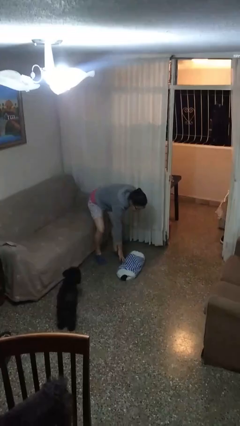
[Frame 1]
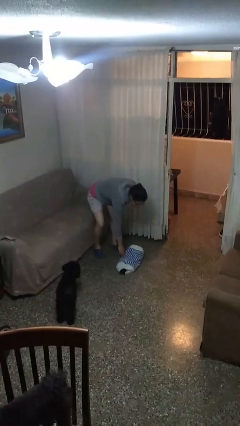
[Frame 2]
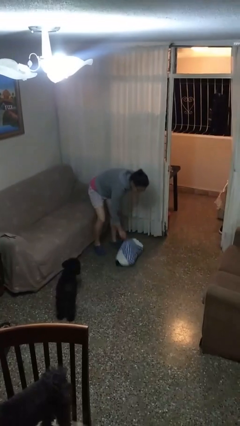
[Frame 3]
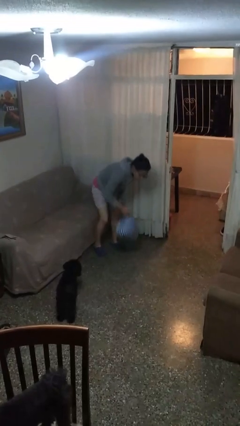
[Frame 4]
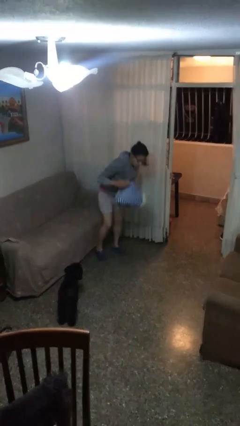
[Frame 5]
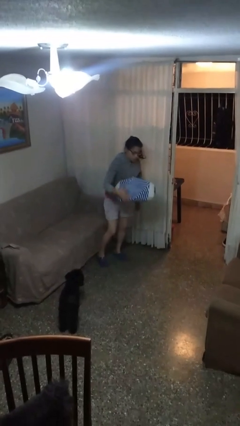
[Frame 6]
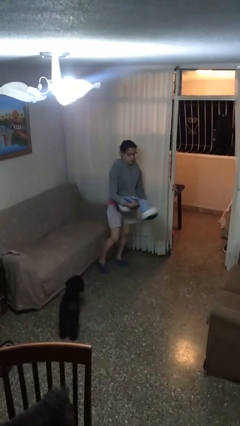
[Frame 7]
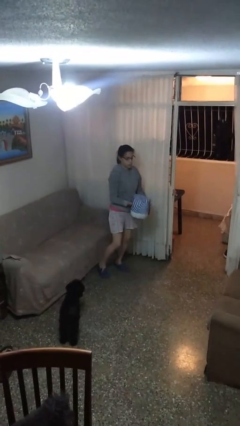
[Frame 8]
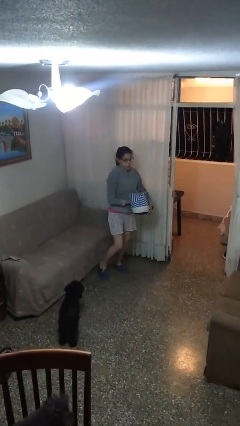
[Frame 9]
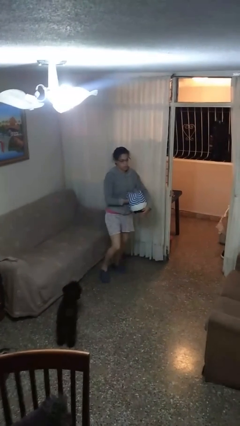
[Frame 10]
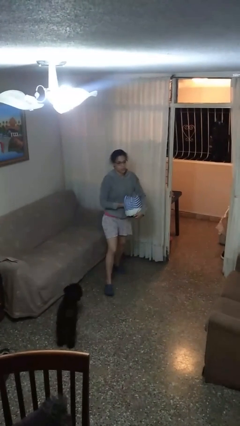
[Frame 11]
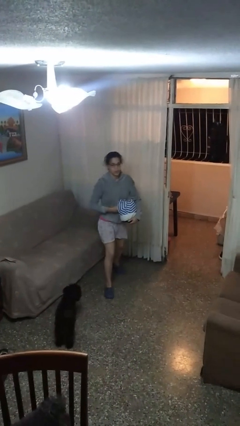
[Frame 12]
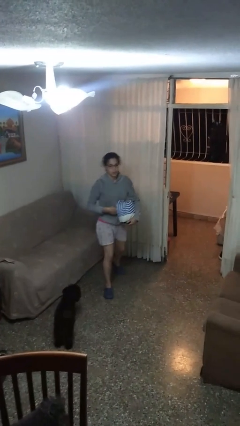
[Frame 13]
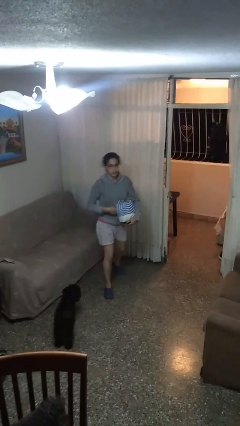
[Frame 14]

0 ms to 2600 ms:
person picks up object from floor

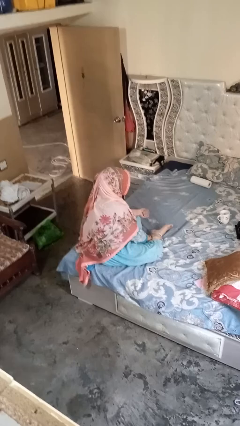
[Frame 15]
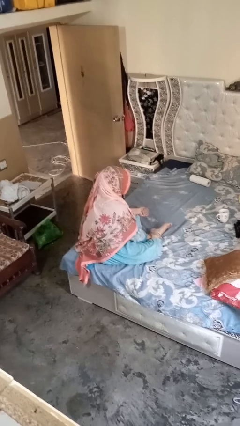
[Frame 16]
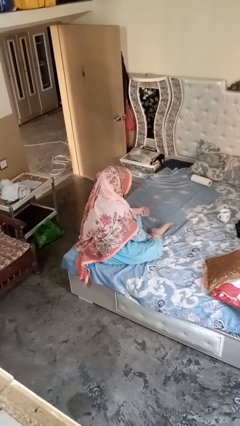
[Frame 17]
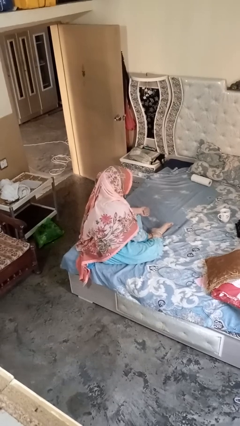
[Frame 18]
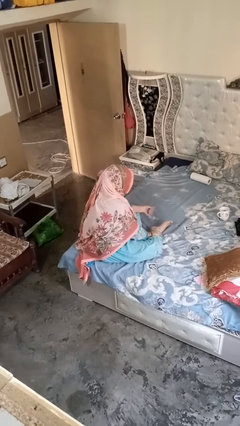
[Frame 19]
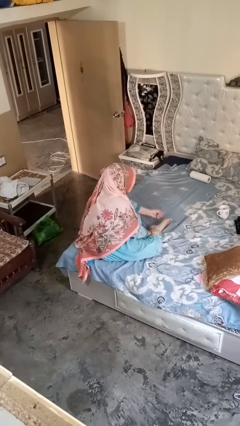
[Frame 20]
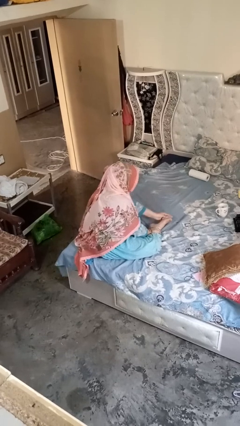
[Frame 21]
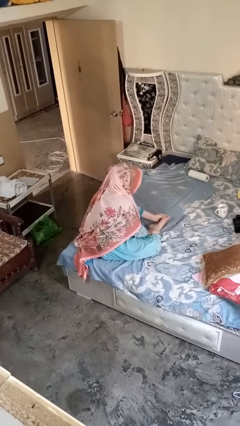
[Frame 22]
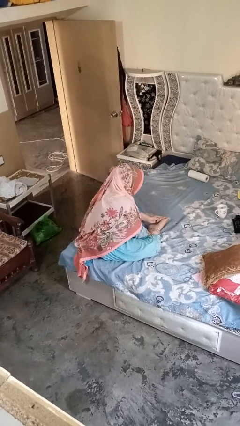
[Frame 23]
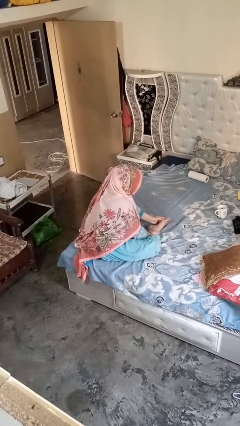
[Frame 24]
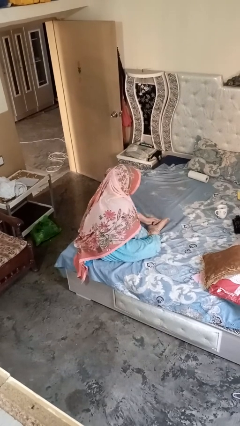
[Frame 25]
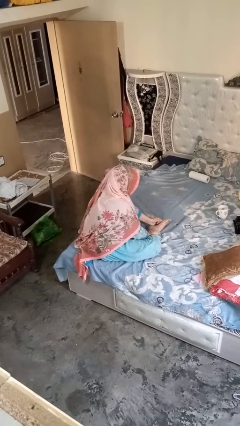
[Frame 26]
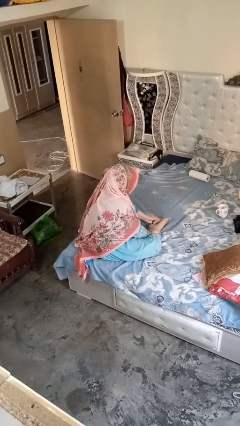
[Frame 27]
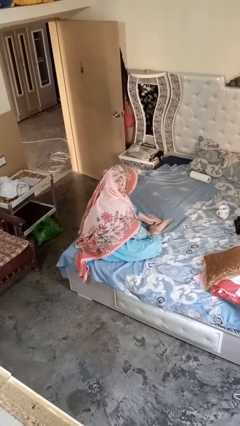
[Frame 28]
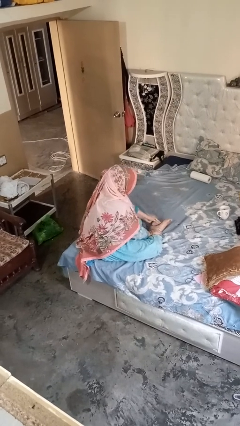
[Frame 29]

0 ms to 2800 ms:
person rubs foot

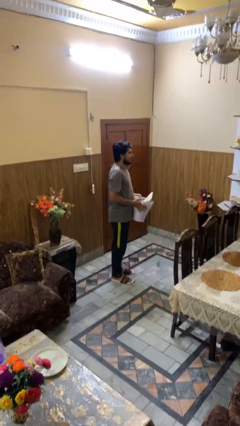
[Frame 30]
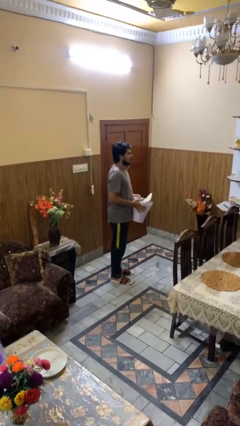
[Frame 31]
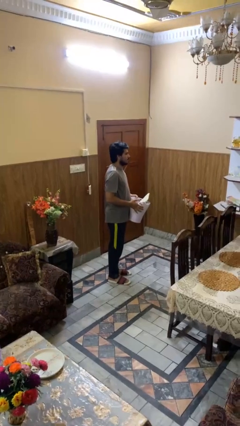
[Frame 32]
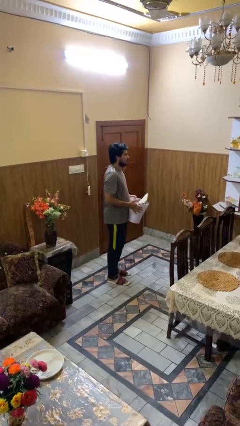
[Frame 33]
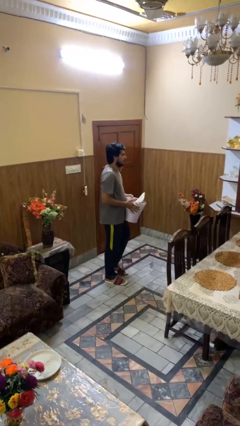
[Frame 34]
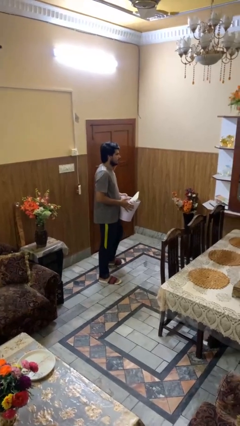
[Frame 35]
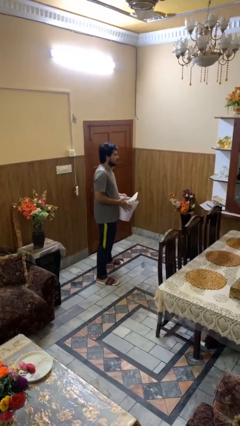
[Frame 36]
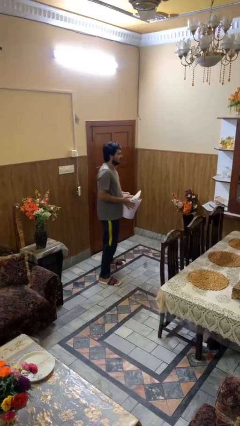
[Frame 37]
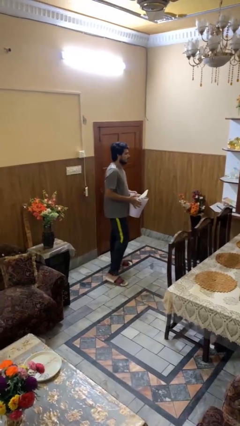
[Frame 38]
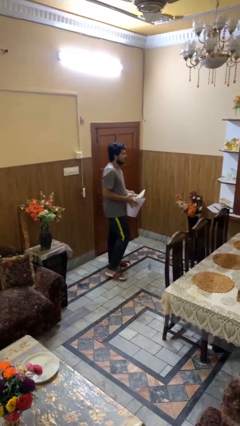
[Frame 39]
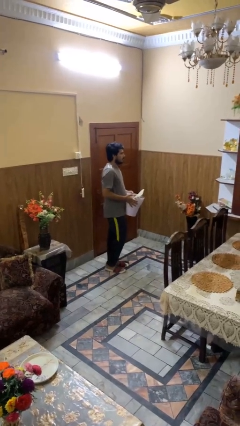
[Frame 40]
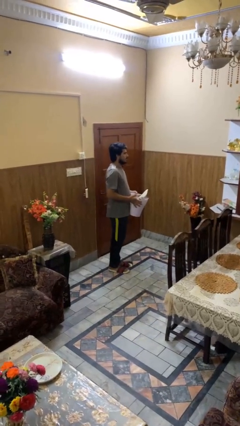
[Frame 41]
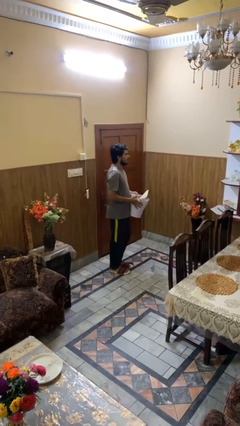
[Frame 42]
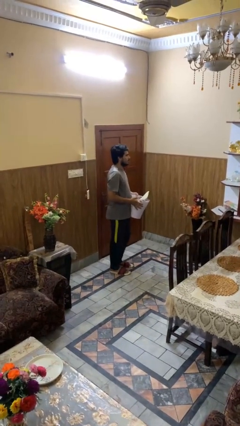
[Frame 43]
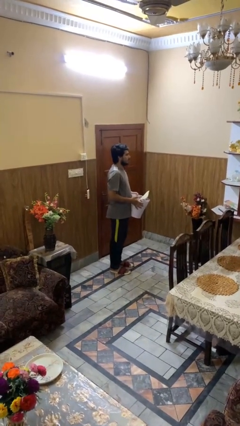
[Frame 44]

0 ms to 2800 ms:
person carries laundry basket

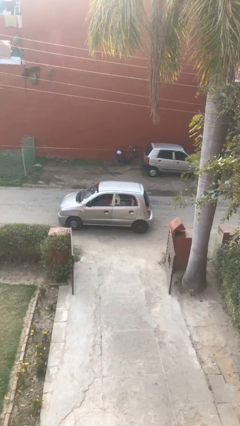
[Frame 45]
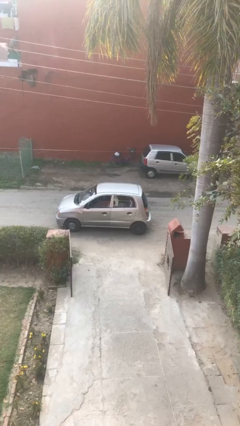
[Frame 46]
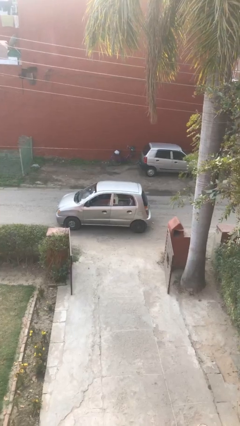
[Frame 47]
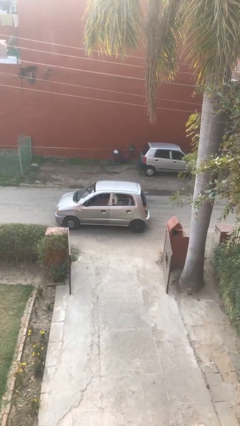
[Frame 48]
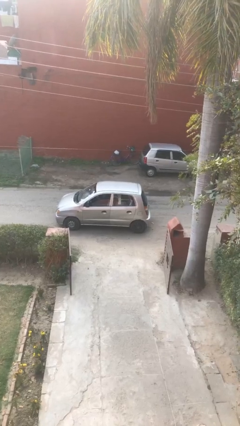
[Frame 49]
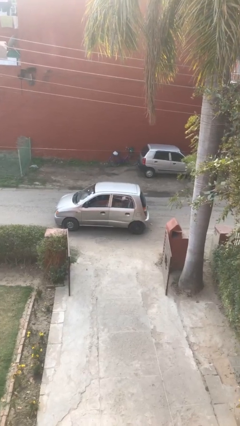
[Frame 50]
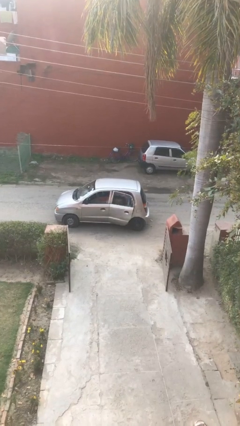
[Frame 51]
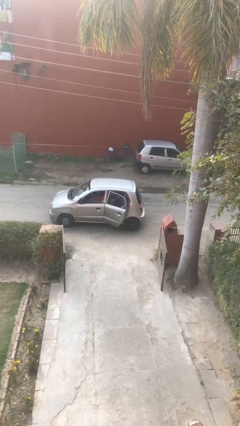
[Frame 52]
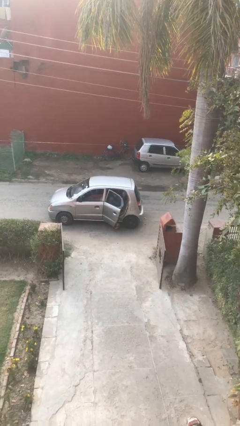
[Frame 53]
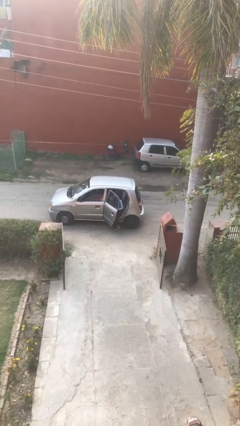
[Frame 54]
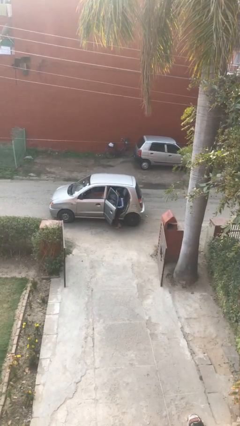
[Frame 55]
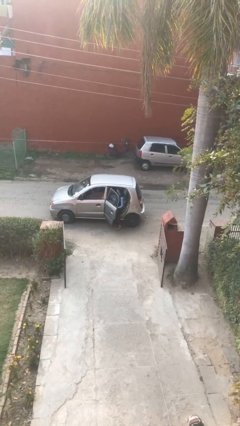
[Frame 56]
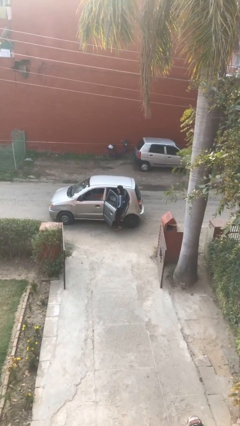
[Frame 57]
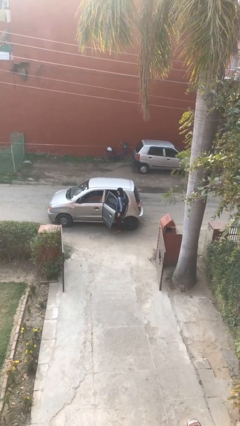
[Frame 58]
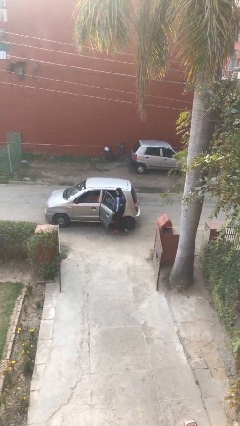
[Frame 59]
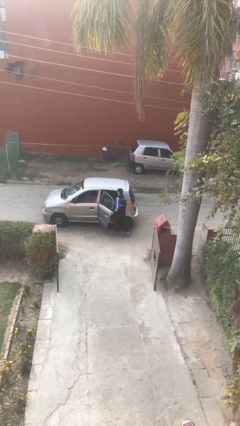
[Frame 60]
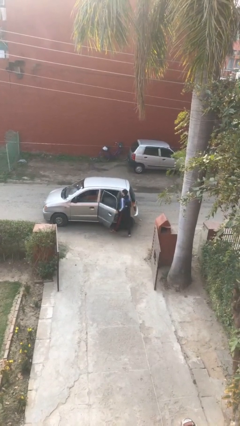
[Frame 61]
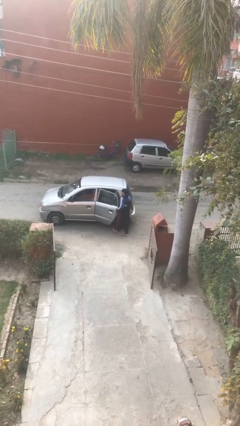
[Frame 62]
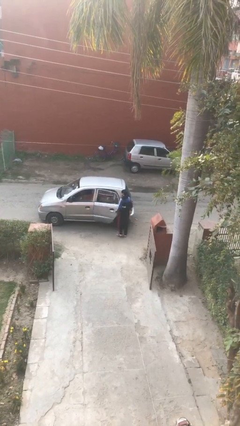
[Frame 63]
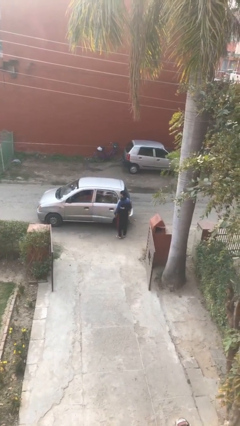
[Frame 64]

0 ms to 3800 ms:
car drops off person

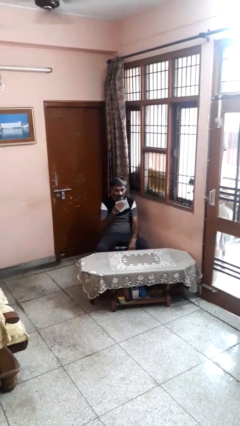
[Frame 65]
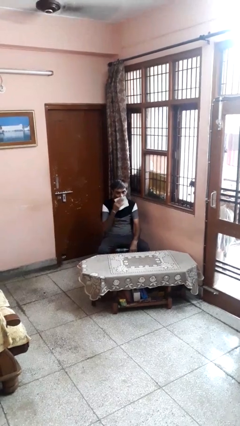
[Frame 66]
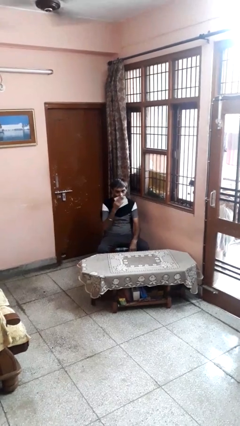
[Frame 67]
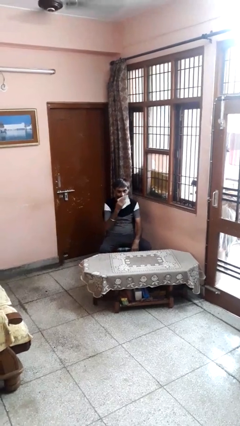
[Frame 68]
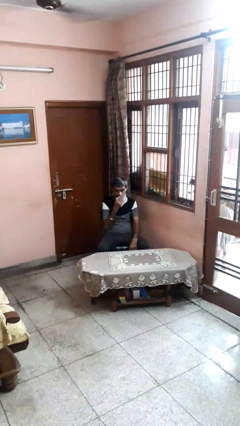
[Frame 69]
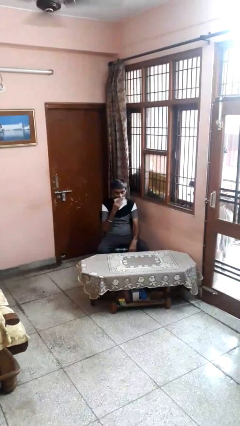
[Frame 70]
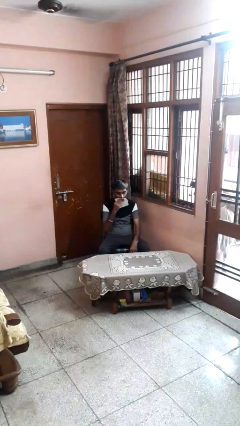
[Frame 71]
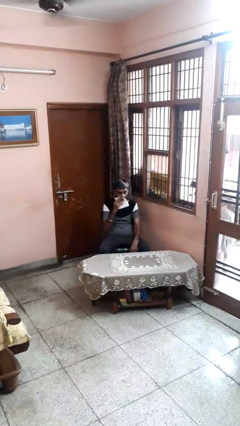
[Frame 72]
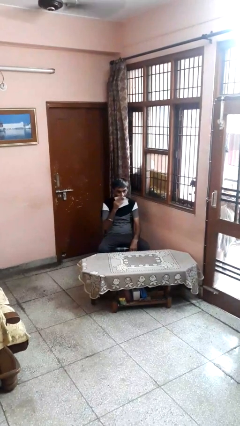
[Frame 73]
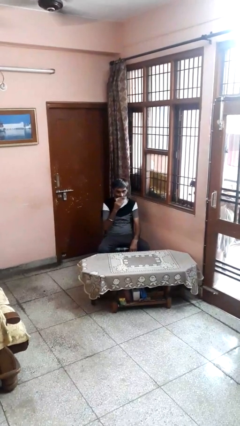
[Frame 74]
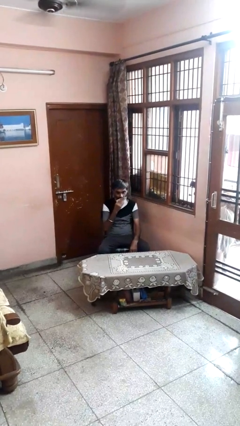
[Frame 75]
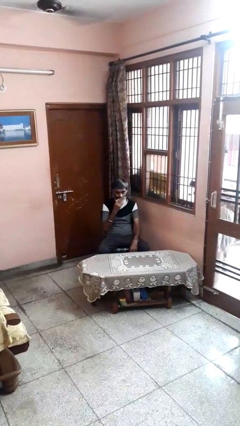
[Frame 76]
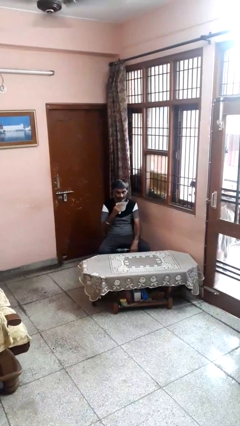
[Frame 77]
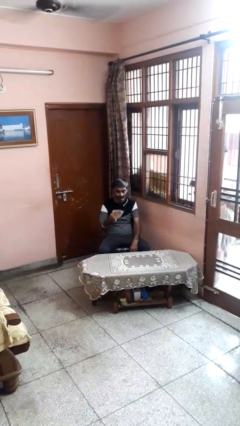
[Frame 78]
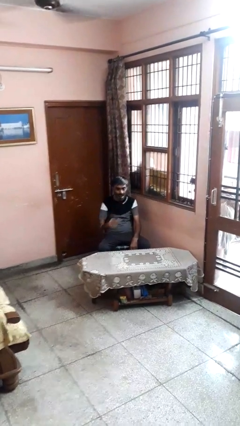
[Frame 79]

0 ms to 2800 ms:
person wipes mouth with napkin

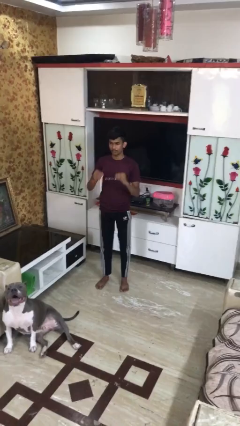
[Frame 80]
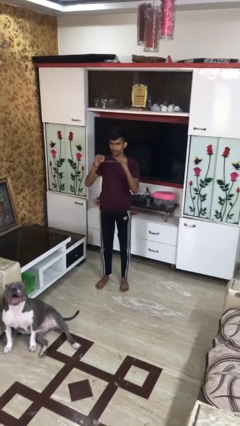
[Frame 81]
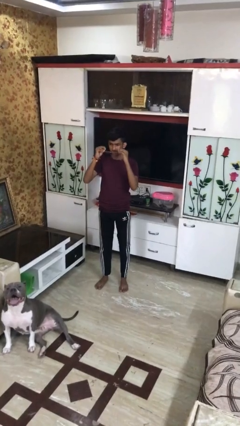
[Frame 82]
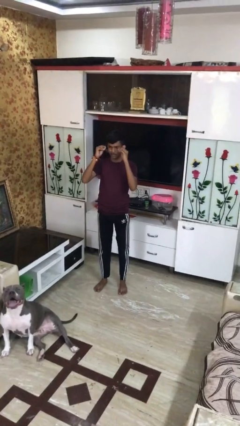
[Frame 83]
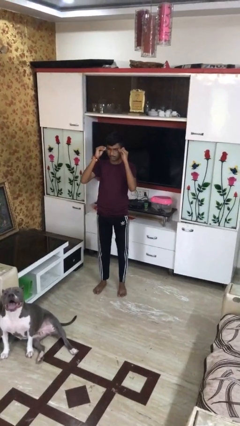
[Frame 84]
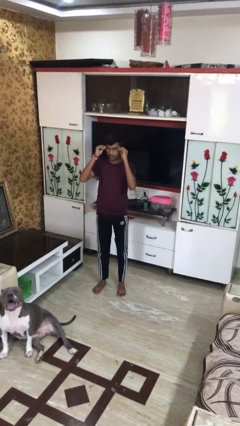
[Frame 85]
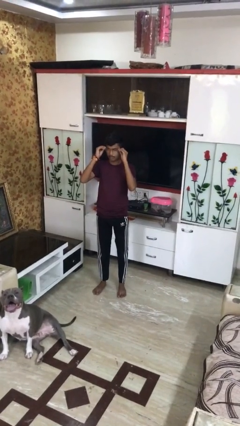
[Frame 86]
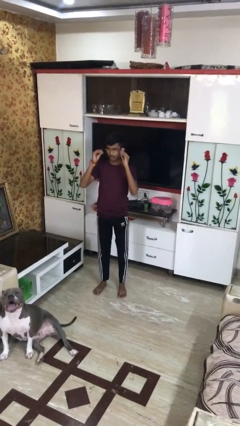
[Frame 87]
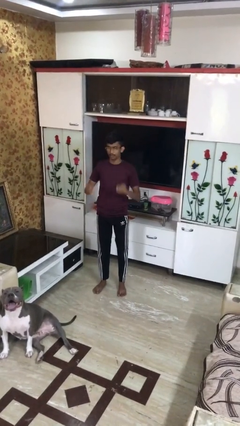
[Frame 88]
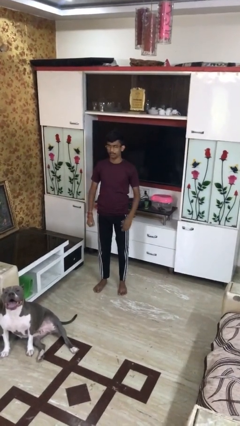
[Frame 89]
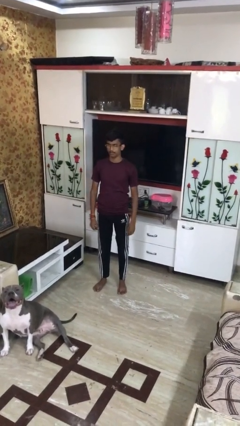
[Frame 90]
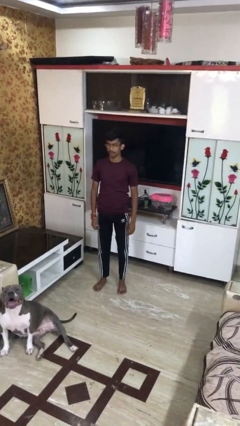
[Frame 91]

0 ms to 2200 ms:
person puts on glasses

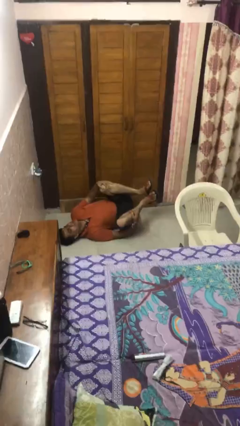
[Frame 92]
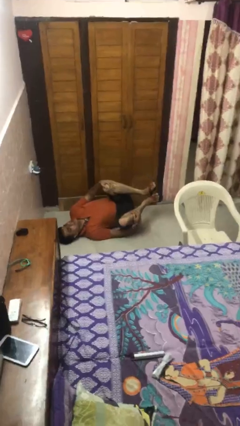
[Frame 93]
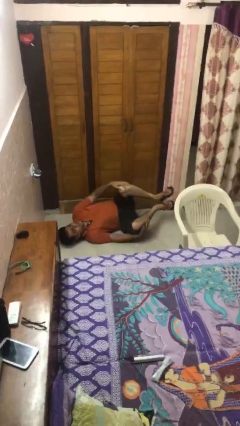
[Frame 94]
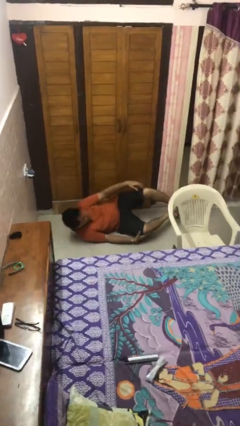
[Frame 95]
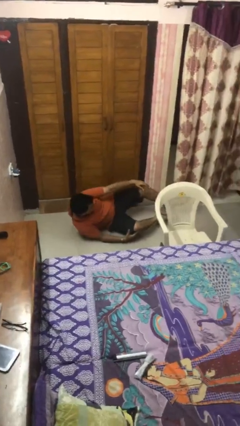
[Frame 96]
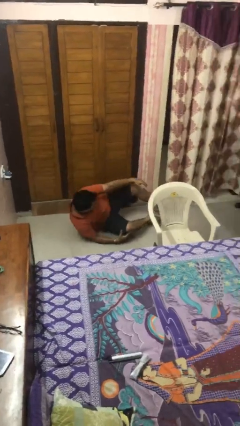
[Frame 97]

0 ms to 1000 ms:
person lies down on floor
